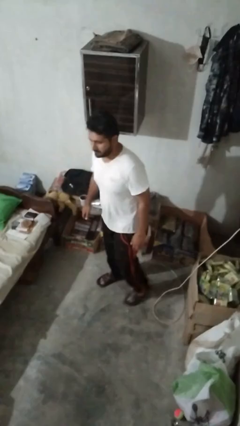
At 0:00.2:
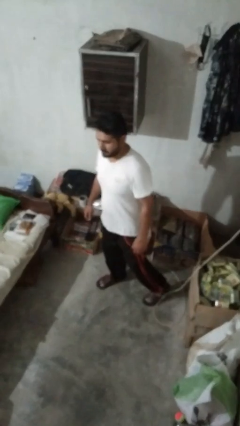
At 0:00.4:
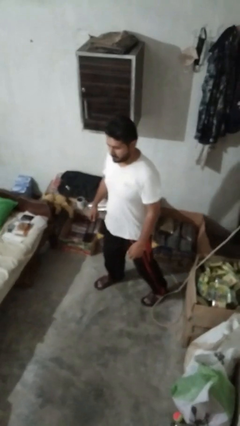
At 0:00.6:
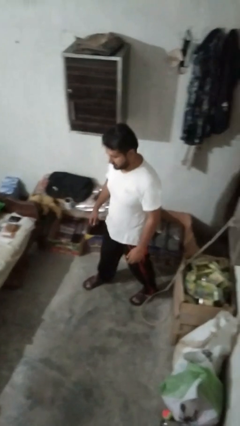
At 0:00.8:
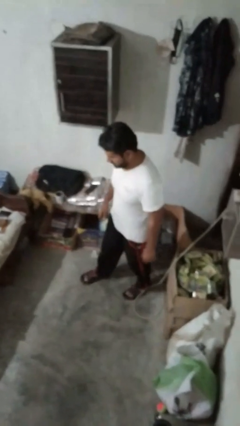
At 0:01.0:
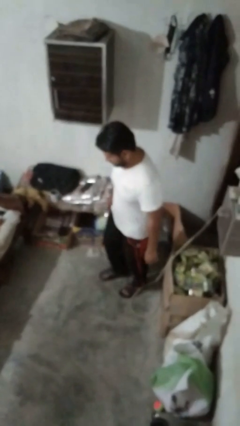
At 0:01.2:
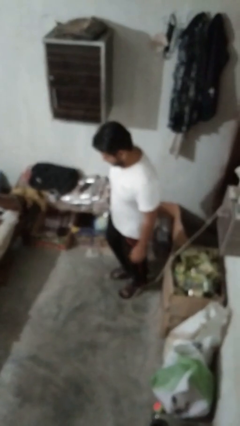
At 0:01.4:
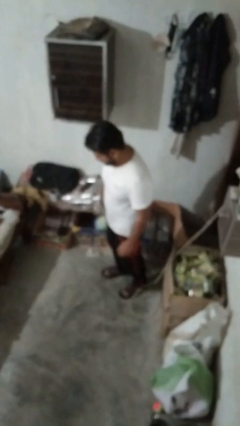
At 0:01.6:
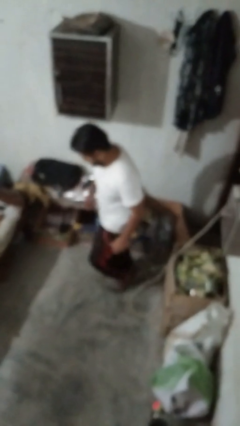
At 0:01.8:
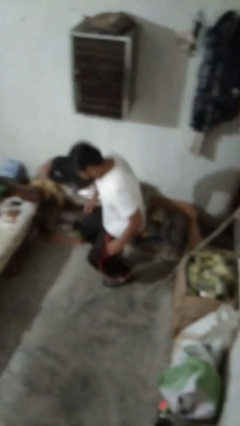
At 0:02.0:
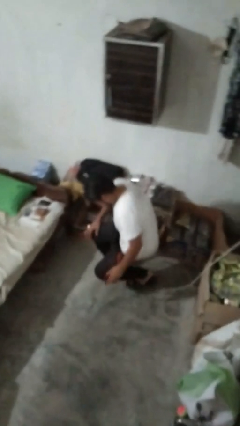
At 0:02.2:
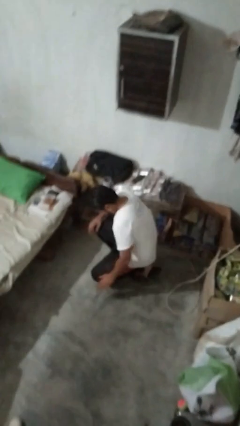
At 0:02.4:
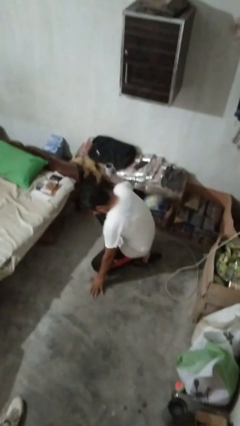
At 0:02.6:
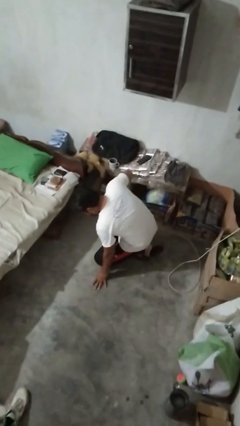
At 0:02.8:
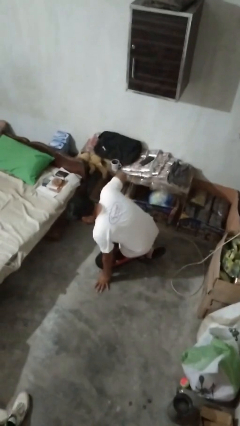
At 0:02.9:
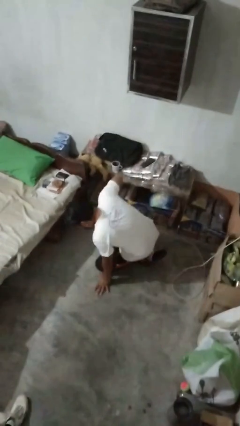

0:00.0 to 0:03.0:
person trips on object on floor

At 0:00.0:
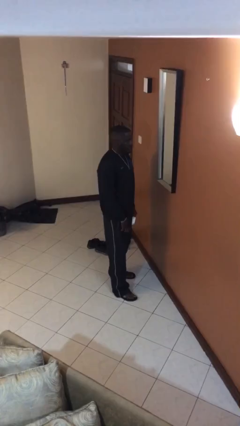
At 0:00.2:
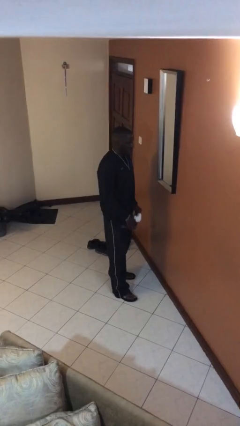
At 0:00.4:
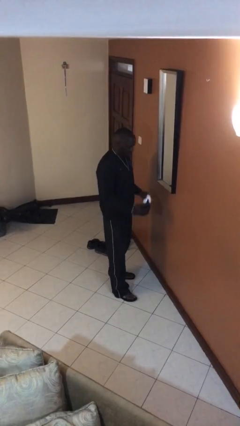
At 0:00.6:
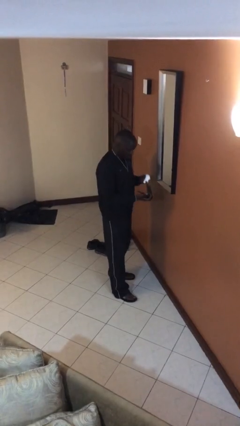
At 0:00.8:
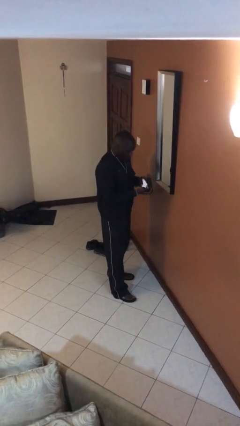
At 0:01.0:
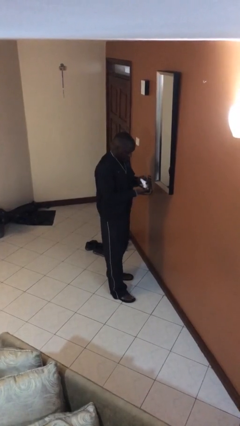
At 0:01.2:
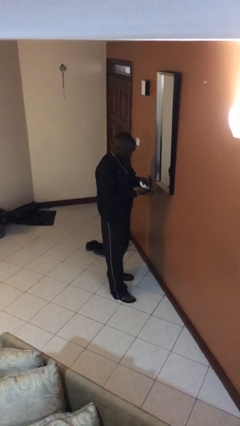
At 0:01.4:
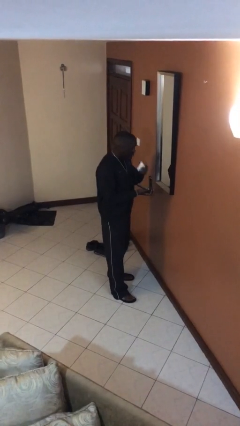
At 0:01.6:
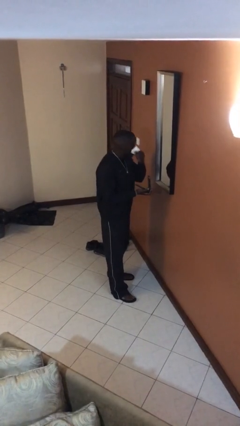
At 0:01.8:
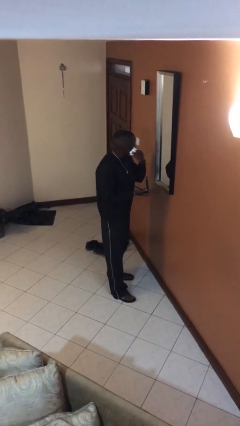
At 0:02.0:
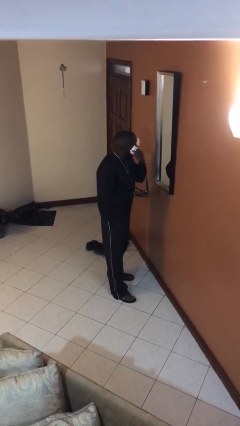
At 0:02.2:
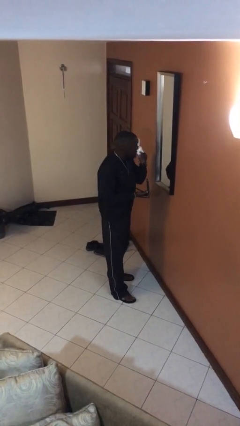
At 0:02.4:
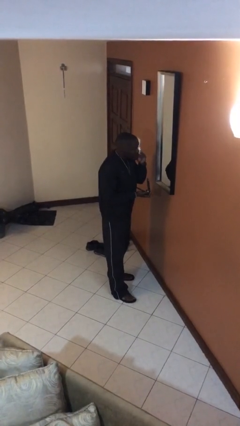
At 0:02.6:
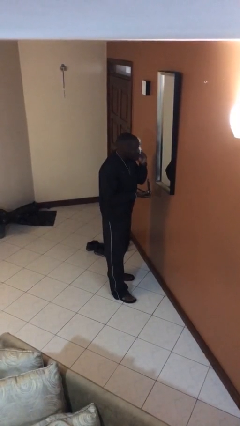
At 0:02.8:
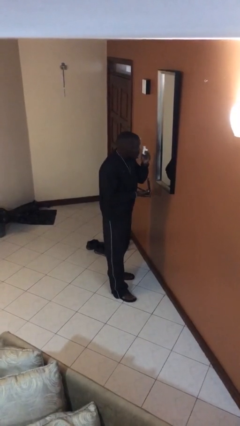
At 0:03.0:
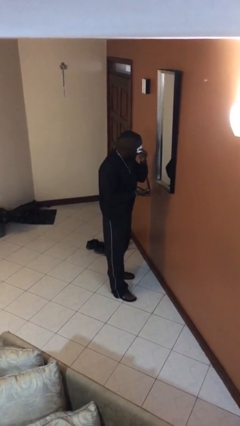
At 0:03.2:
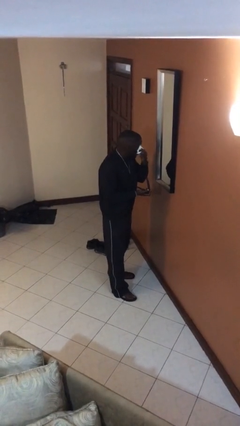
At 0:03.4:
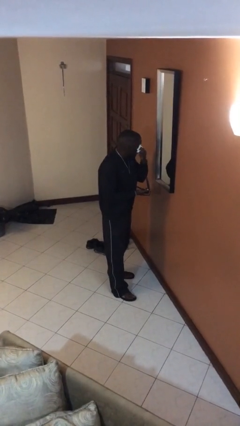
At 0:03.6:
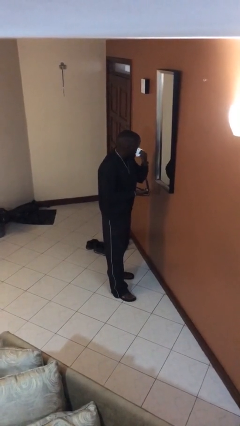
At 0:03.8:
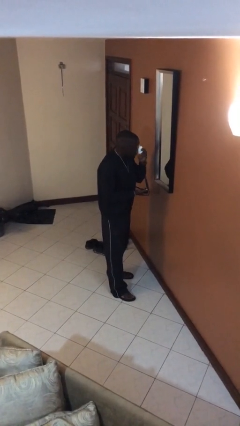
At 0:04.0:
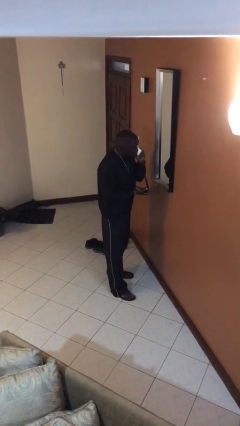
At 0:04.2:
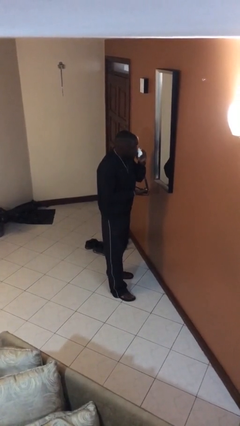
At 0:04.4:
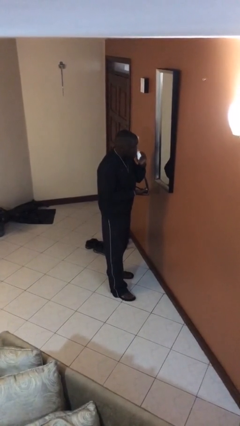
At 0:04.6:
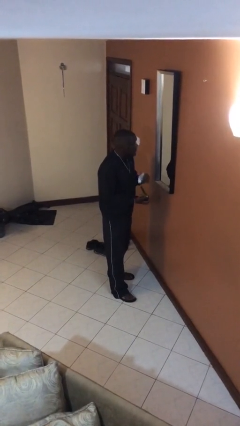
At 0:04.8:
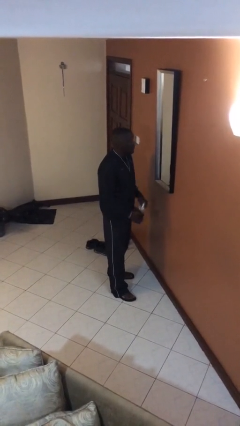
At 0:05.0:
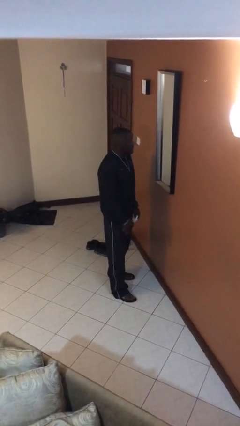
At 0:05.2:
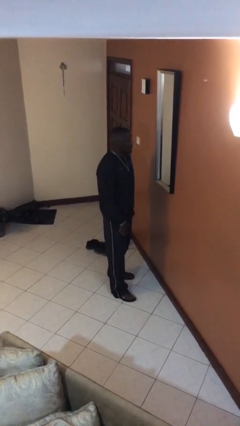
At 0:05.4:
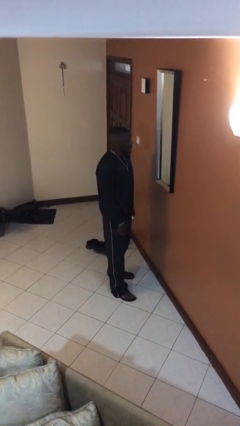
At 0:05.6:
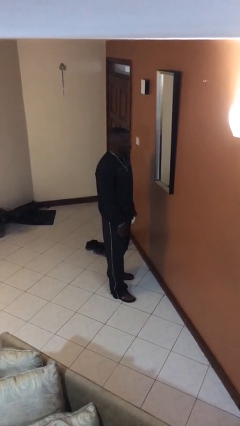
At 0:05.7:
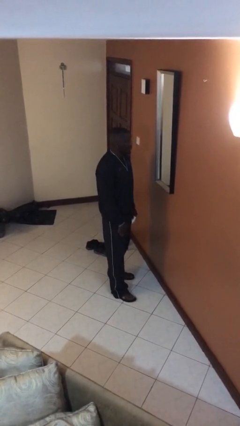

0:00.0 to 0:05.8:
person applies foundation makeup

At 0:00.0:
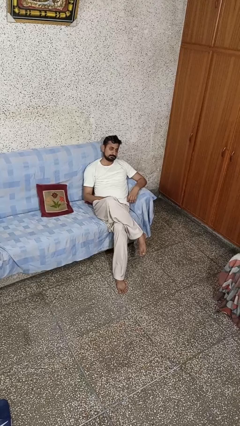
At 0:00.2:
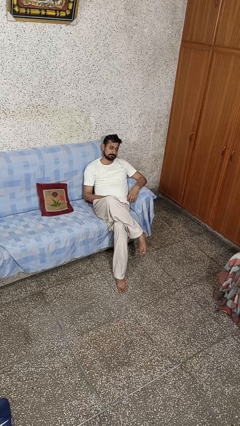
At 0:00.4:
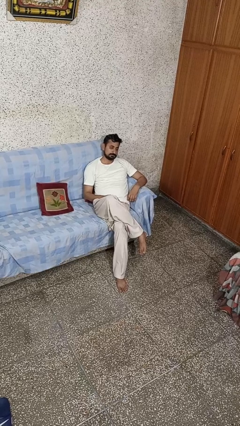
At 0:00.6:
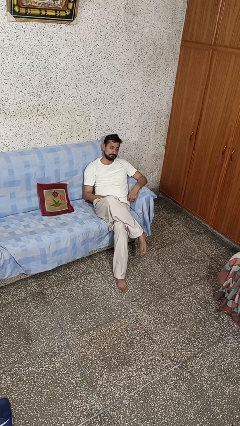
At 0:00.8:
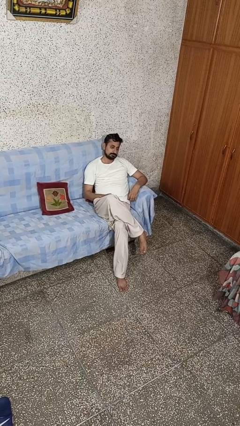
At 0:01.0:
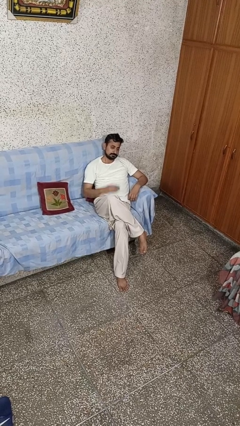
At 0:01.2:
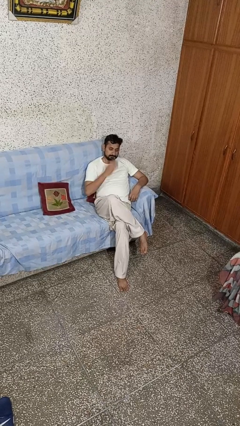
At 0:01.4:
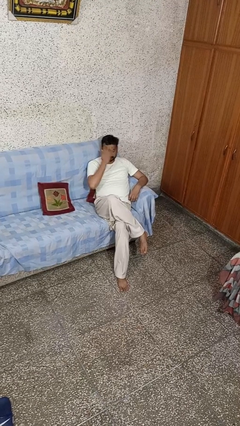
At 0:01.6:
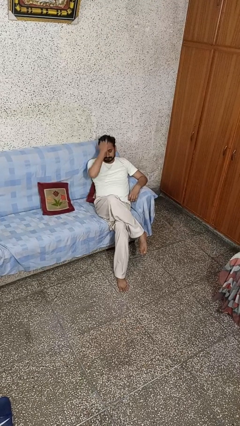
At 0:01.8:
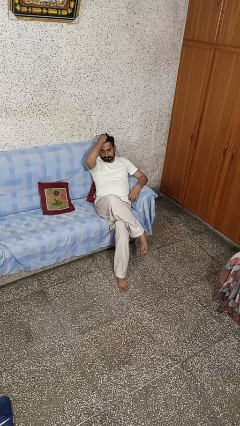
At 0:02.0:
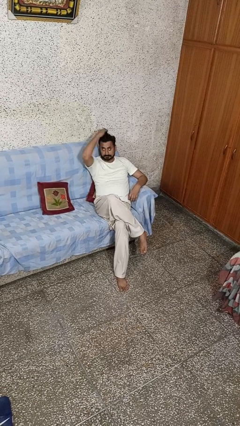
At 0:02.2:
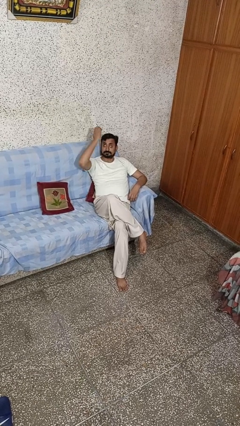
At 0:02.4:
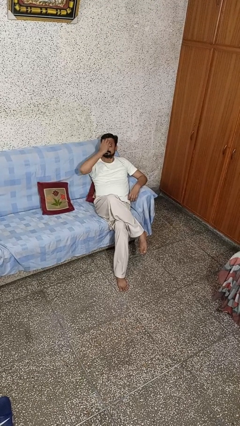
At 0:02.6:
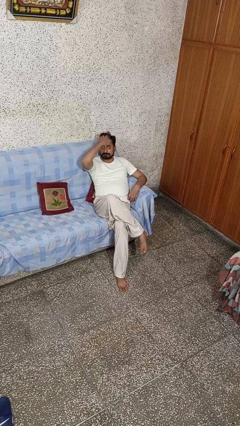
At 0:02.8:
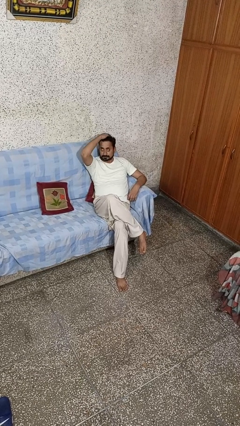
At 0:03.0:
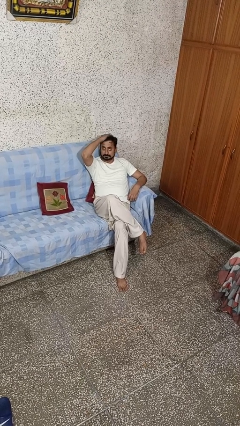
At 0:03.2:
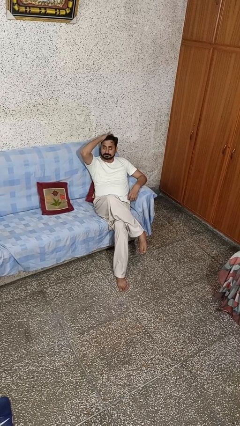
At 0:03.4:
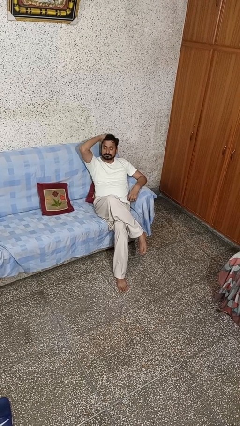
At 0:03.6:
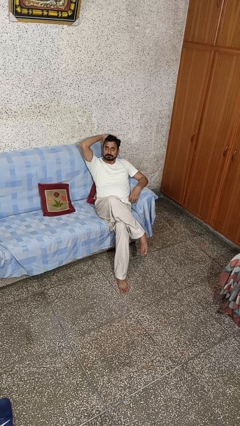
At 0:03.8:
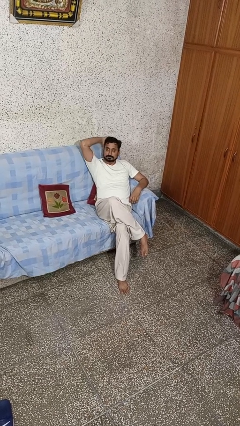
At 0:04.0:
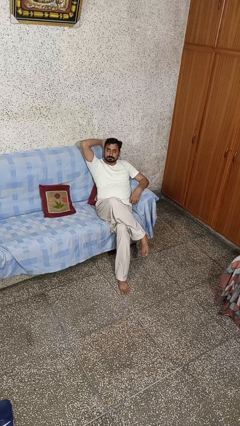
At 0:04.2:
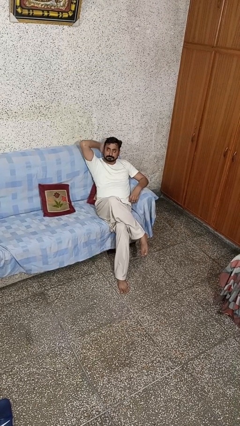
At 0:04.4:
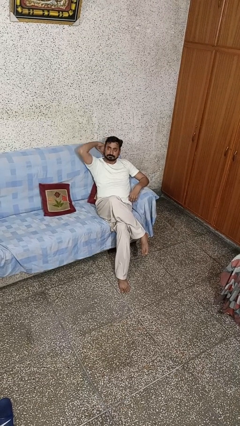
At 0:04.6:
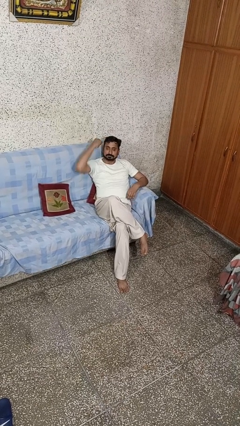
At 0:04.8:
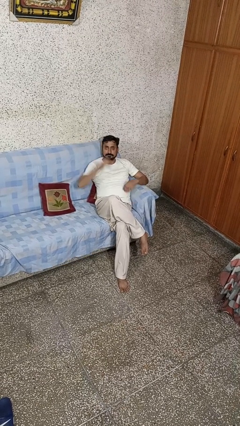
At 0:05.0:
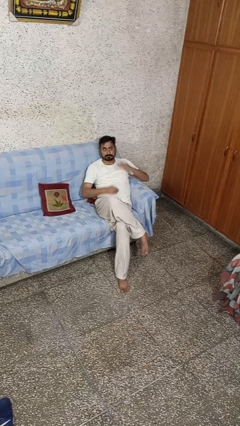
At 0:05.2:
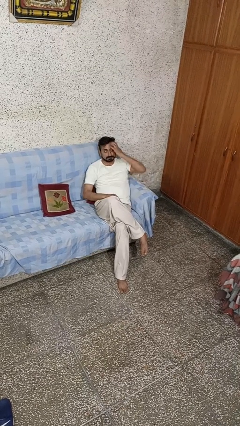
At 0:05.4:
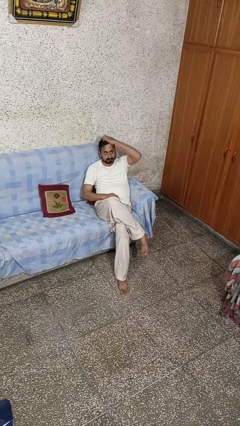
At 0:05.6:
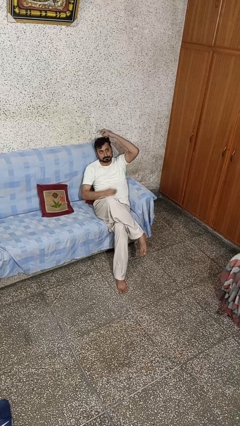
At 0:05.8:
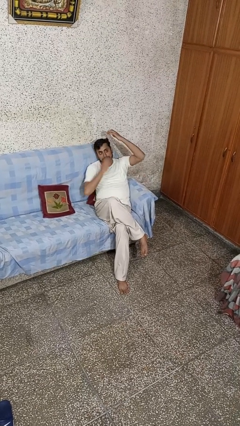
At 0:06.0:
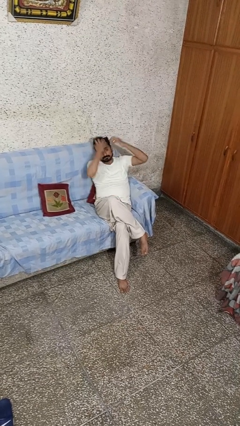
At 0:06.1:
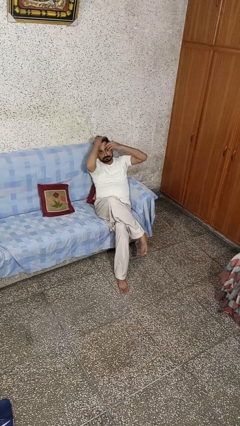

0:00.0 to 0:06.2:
person strokes hair

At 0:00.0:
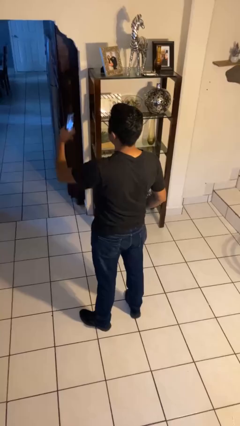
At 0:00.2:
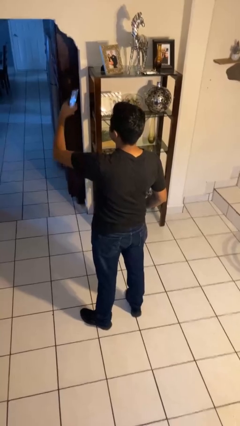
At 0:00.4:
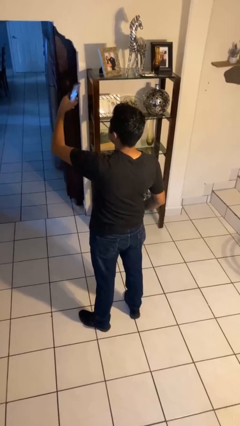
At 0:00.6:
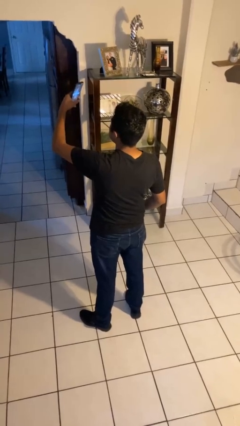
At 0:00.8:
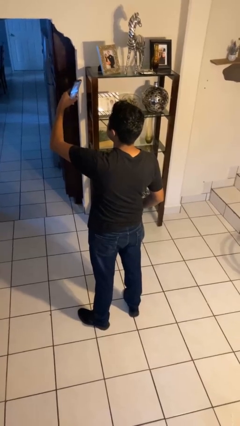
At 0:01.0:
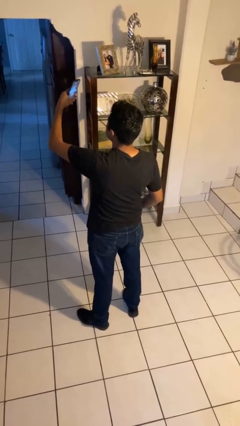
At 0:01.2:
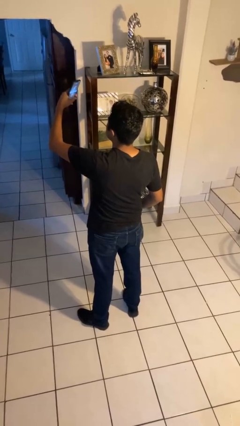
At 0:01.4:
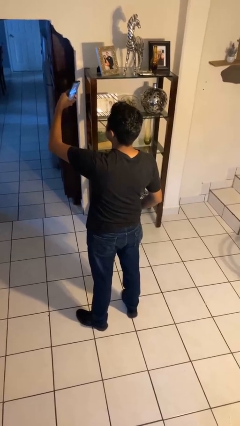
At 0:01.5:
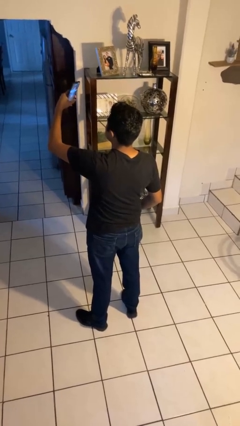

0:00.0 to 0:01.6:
person takes selfie

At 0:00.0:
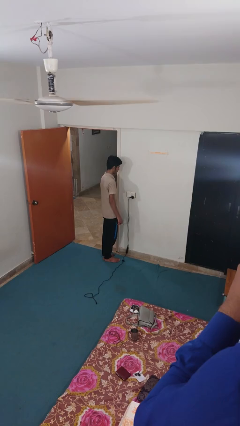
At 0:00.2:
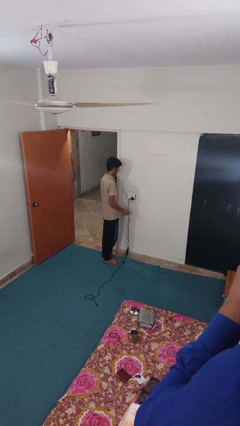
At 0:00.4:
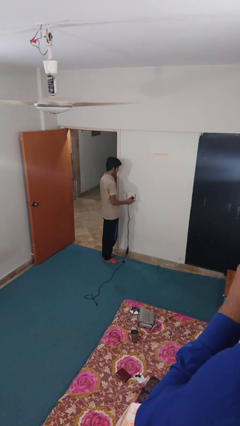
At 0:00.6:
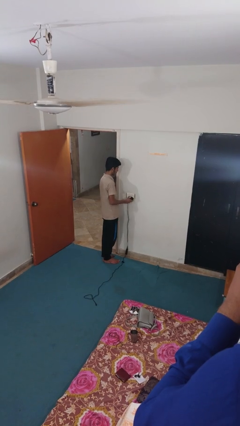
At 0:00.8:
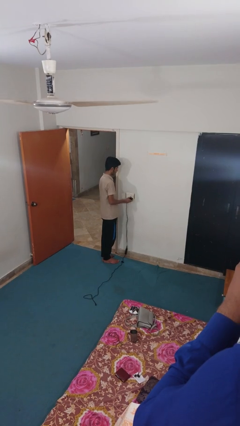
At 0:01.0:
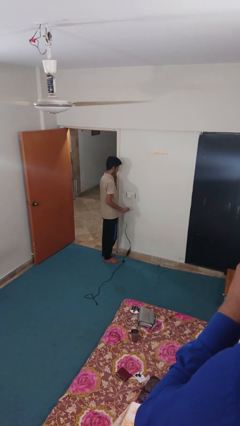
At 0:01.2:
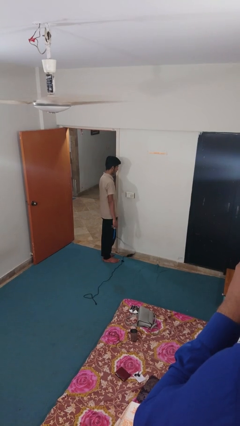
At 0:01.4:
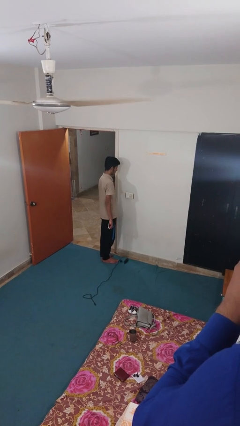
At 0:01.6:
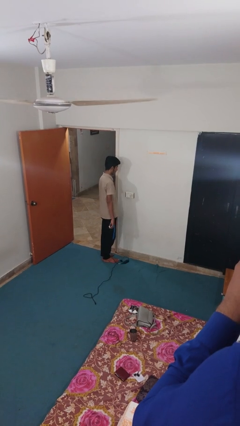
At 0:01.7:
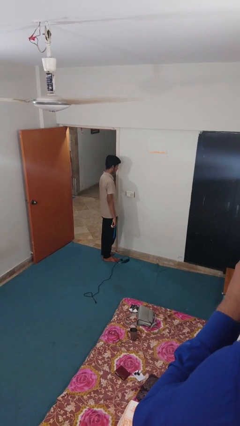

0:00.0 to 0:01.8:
person unplugs from electrical socket
